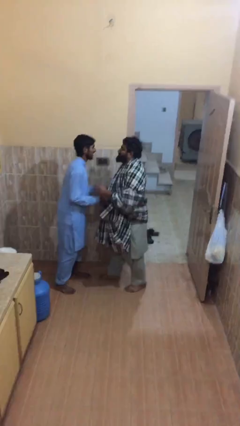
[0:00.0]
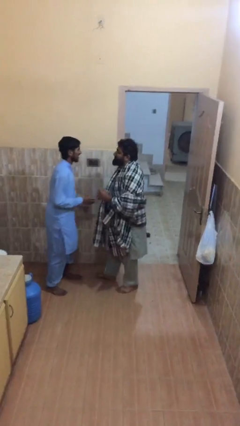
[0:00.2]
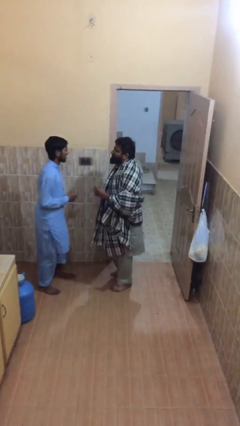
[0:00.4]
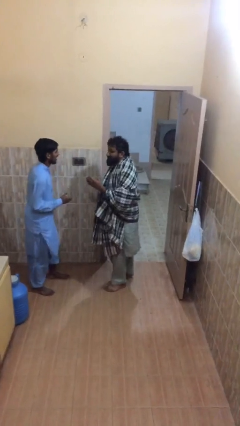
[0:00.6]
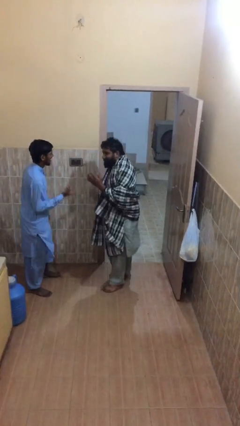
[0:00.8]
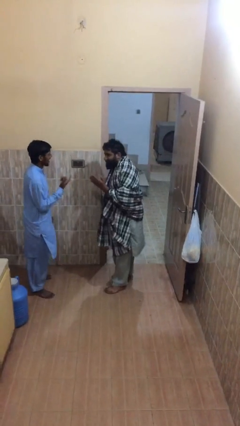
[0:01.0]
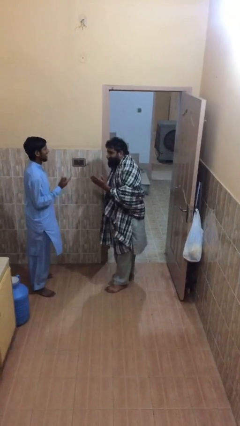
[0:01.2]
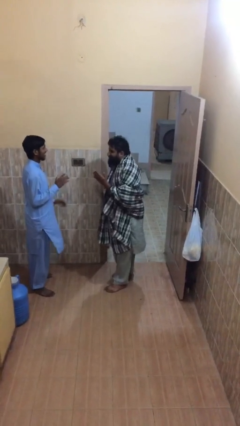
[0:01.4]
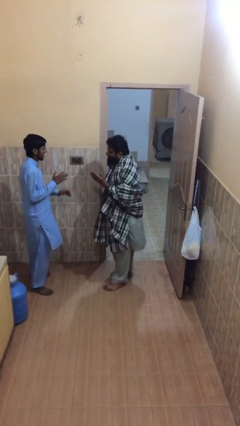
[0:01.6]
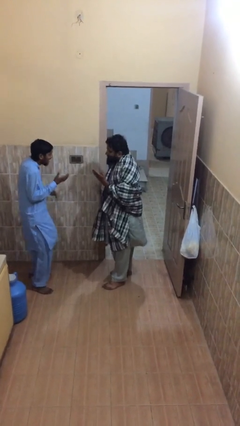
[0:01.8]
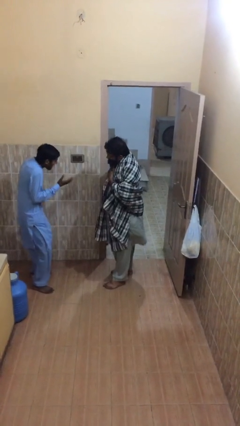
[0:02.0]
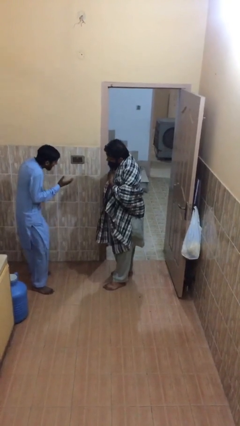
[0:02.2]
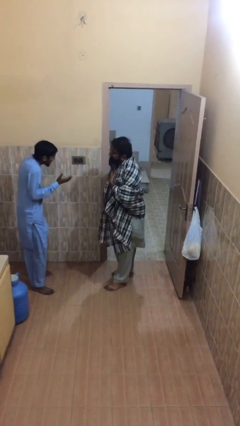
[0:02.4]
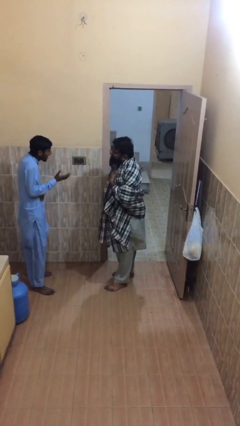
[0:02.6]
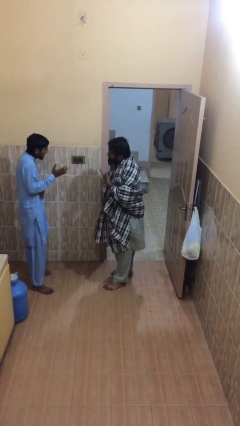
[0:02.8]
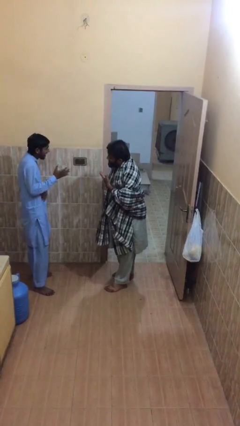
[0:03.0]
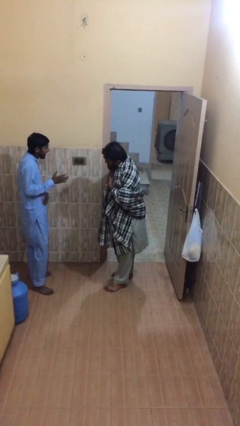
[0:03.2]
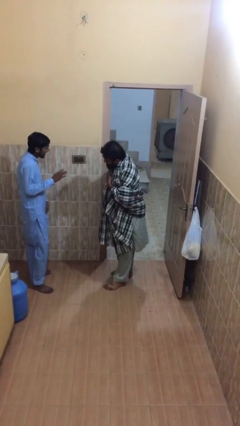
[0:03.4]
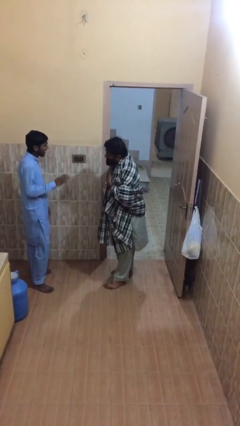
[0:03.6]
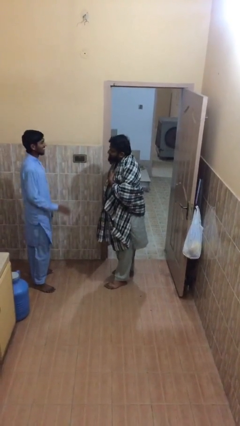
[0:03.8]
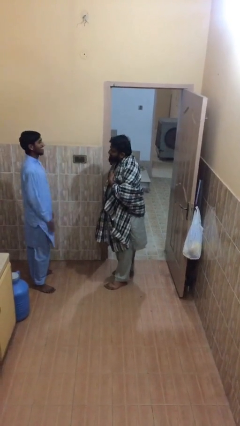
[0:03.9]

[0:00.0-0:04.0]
person talks to person

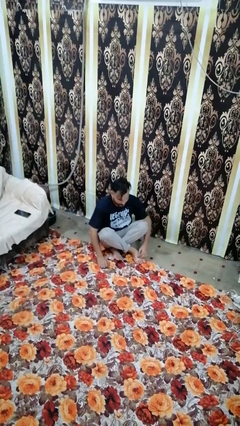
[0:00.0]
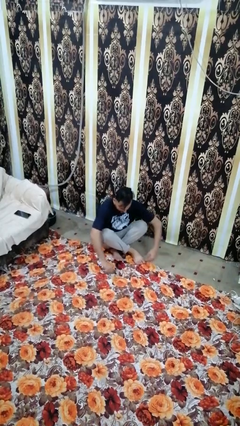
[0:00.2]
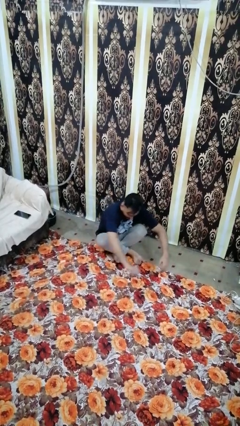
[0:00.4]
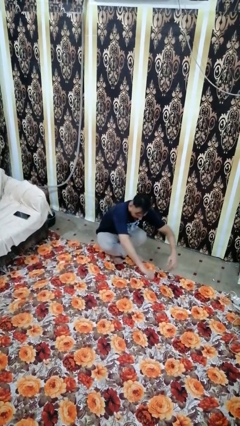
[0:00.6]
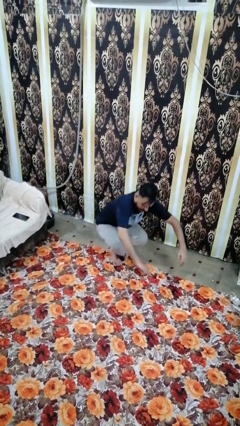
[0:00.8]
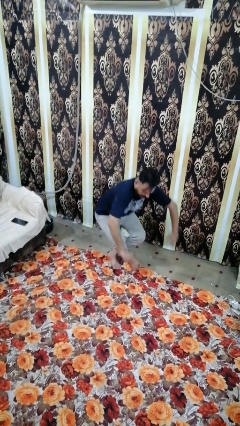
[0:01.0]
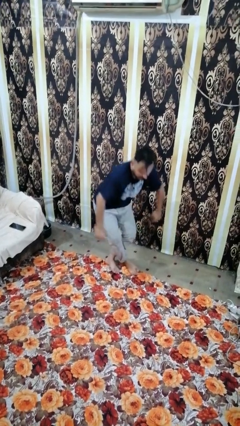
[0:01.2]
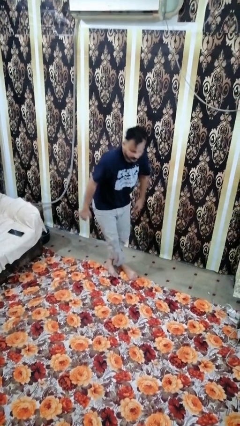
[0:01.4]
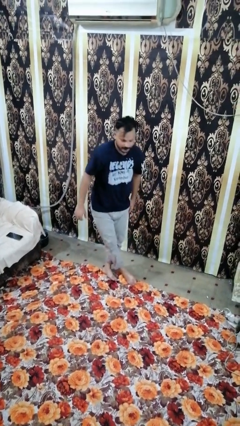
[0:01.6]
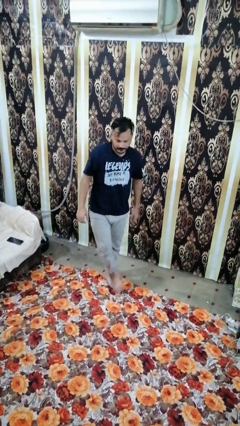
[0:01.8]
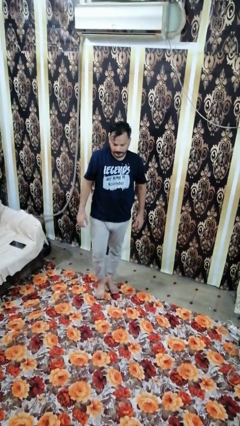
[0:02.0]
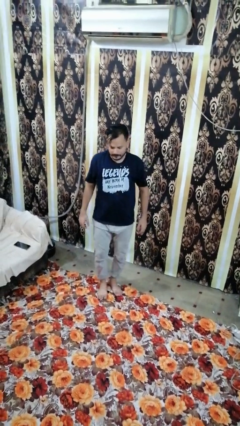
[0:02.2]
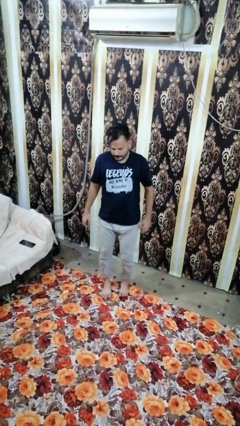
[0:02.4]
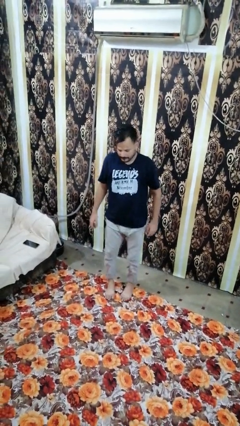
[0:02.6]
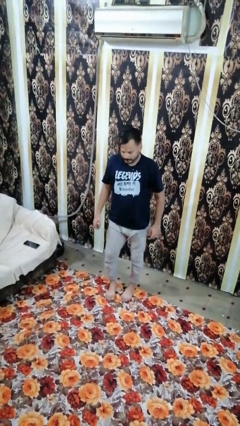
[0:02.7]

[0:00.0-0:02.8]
person stands up from floor

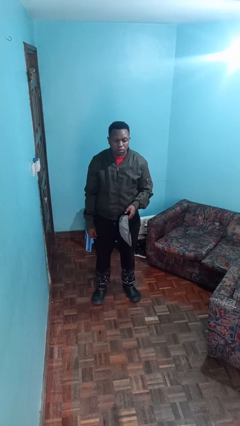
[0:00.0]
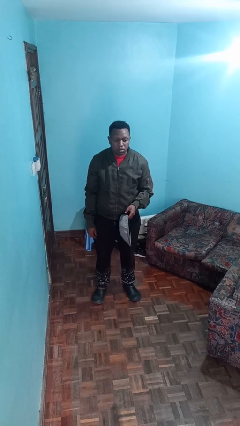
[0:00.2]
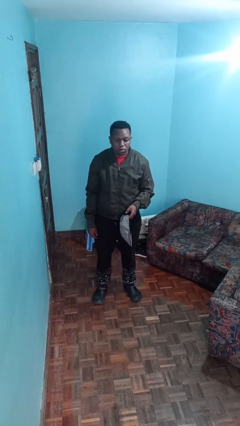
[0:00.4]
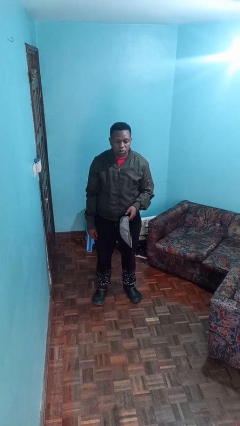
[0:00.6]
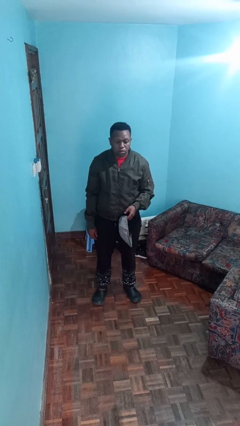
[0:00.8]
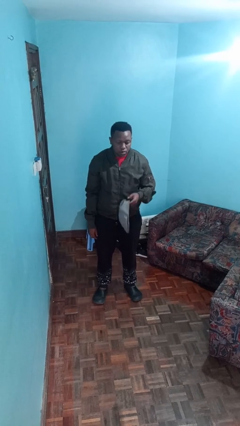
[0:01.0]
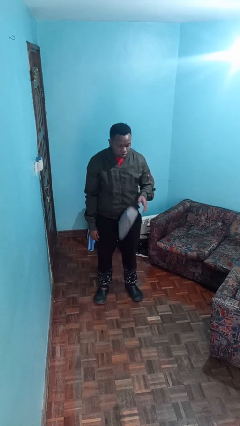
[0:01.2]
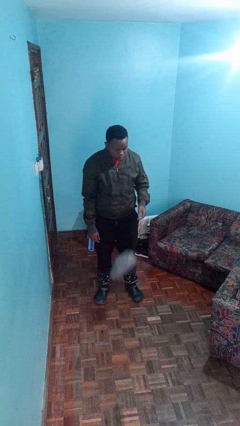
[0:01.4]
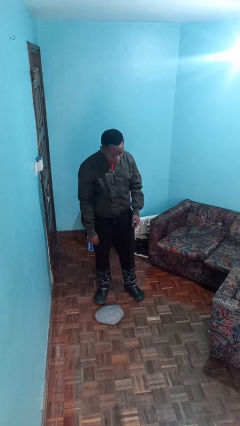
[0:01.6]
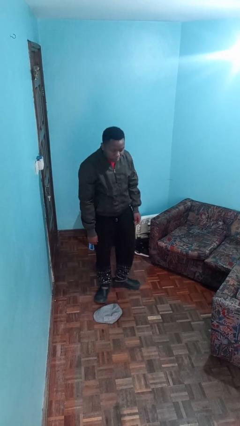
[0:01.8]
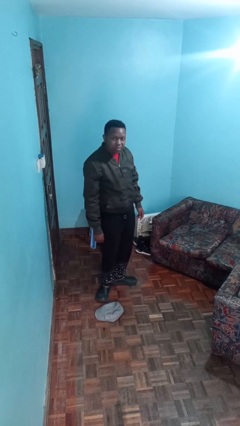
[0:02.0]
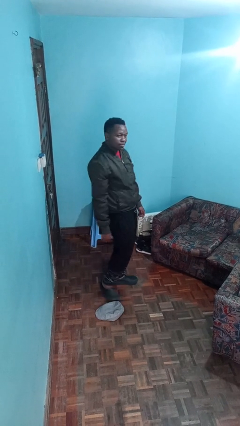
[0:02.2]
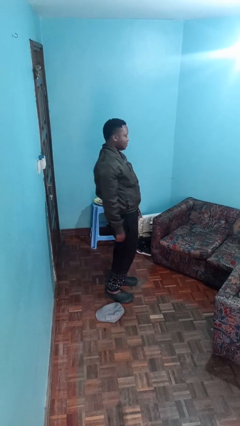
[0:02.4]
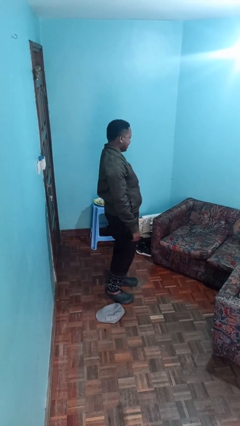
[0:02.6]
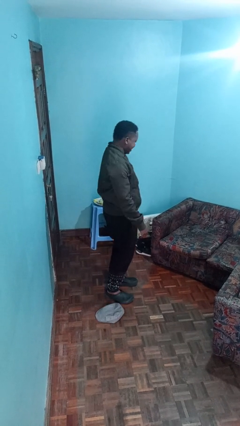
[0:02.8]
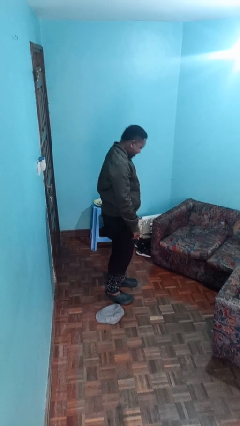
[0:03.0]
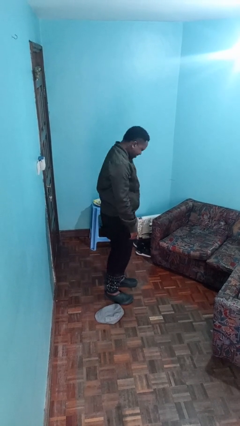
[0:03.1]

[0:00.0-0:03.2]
person drops object

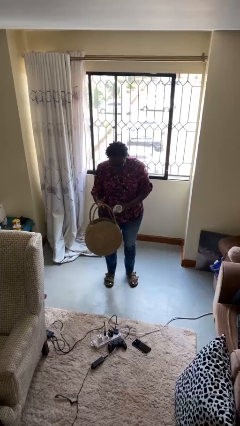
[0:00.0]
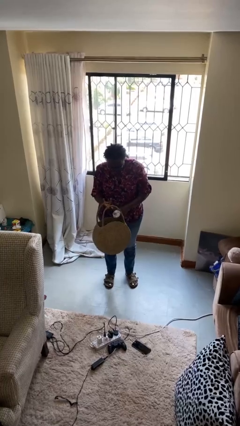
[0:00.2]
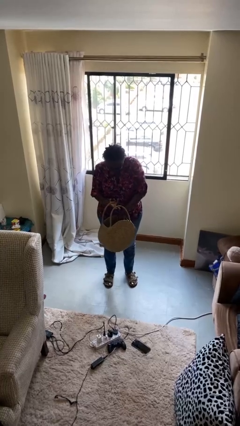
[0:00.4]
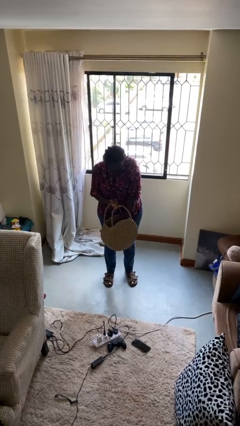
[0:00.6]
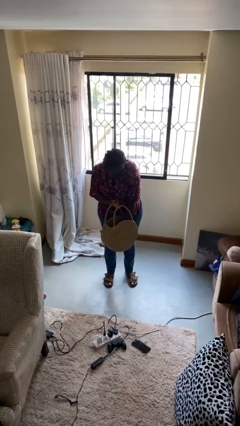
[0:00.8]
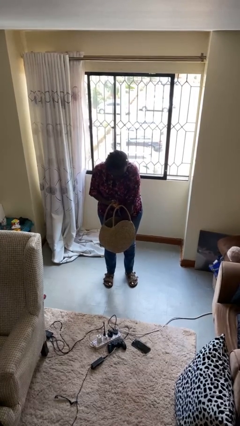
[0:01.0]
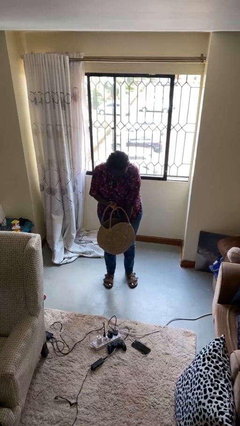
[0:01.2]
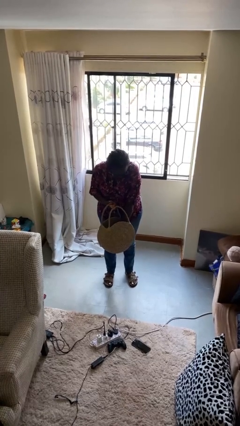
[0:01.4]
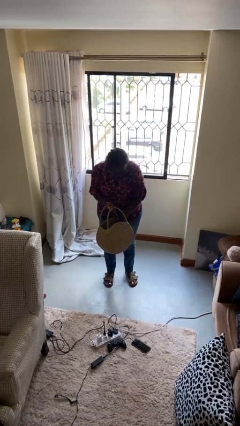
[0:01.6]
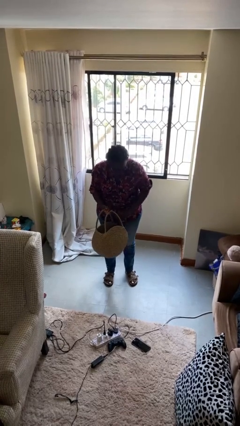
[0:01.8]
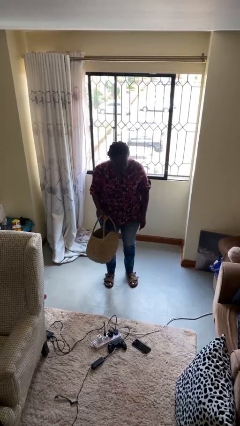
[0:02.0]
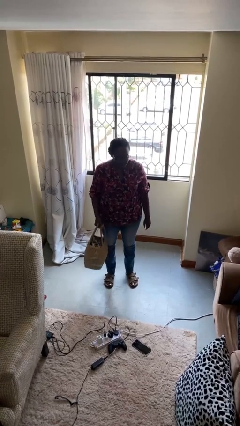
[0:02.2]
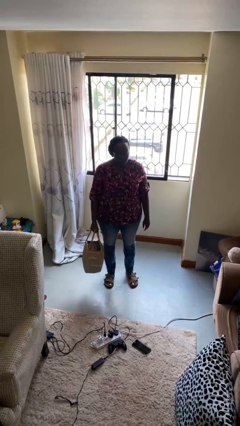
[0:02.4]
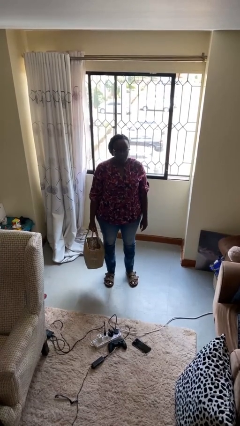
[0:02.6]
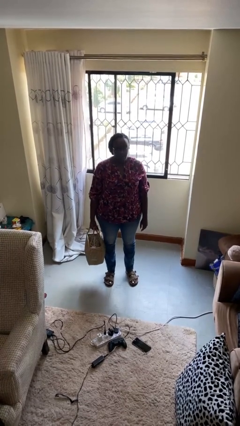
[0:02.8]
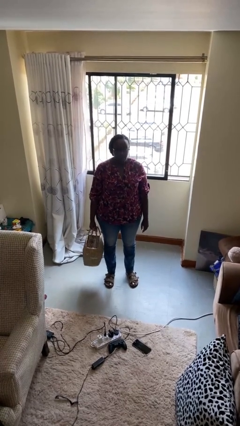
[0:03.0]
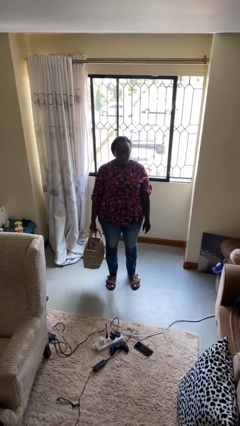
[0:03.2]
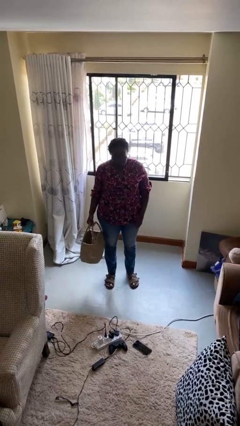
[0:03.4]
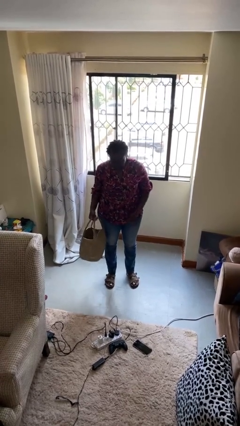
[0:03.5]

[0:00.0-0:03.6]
person puts object into basket

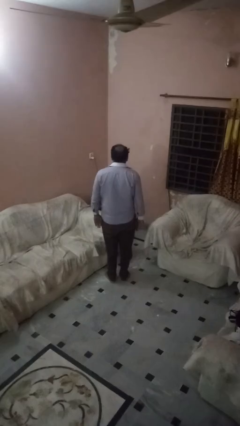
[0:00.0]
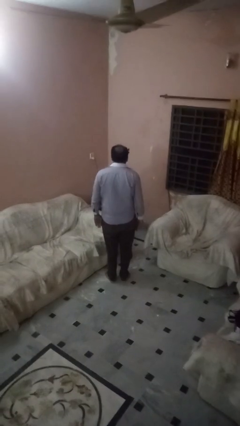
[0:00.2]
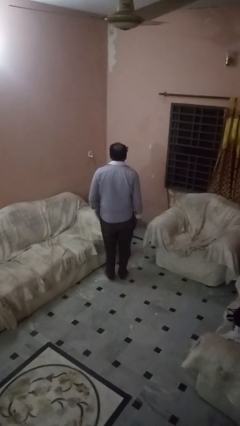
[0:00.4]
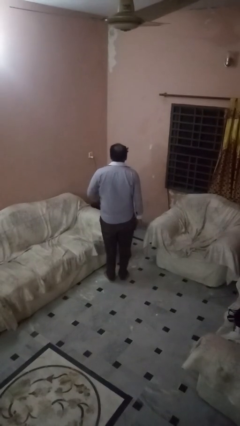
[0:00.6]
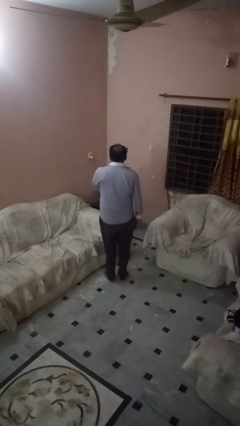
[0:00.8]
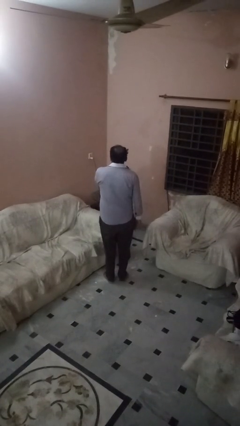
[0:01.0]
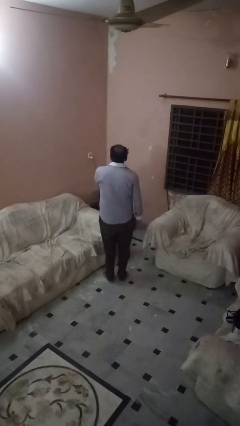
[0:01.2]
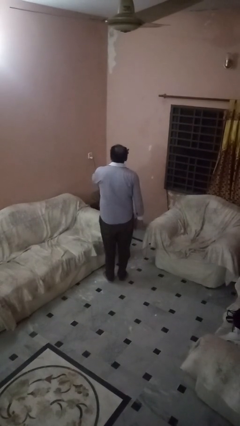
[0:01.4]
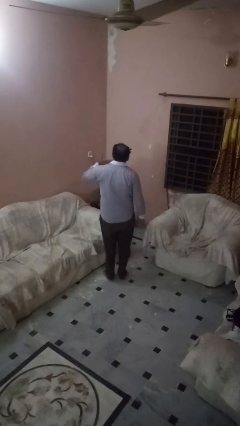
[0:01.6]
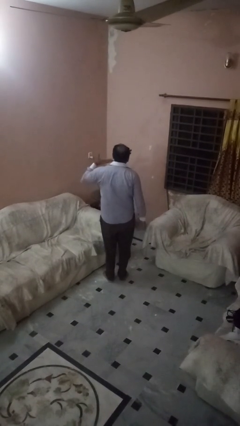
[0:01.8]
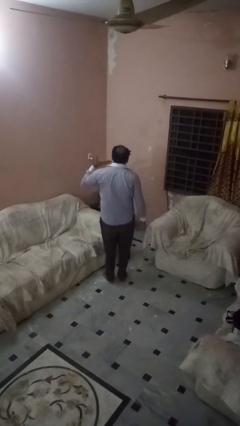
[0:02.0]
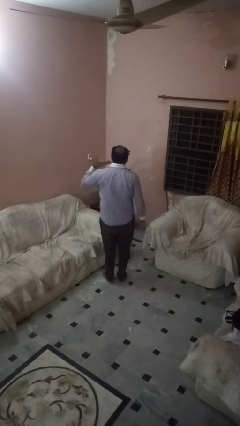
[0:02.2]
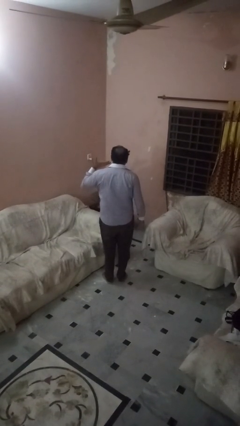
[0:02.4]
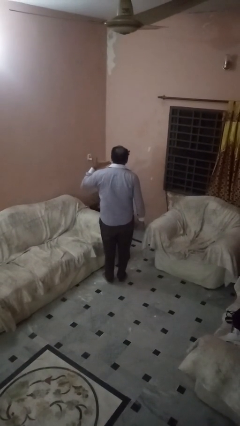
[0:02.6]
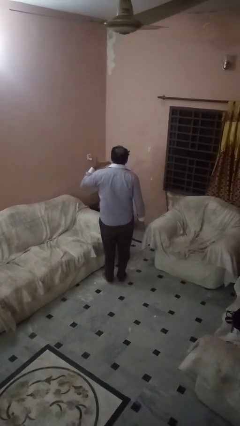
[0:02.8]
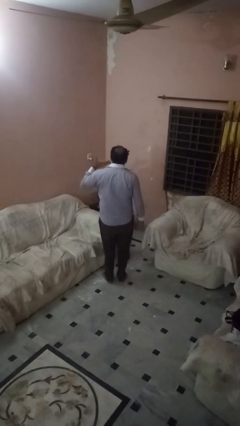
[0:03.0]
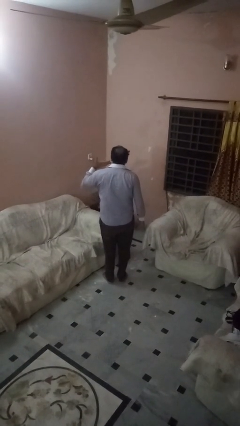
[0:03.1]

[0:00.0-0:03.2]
person gestures cut

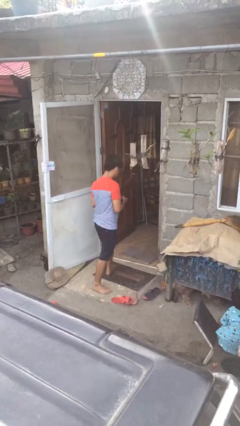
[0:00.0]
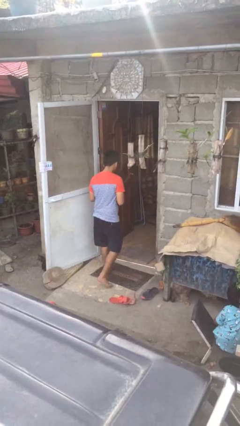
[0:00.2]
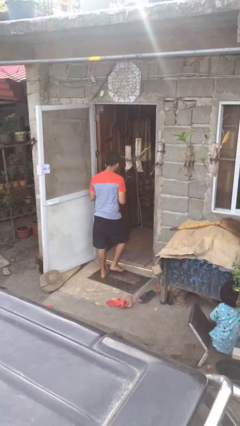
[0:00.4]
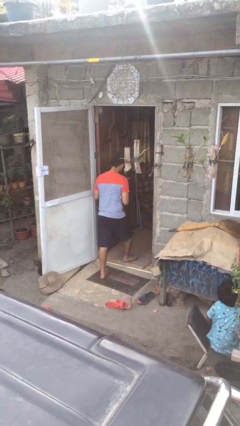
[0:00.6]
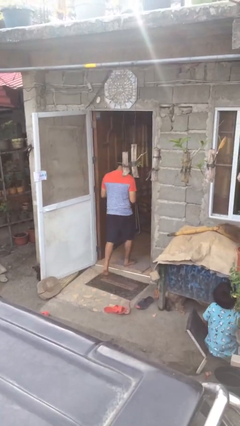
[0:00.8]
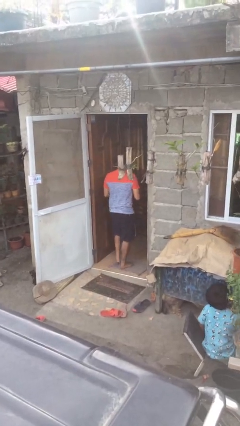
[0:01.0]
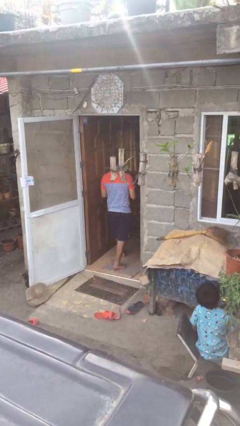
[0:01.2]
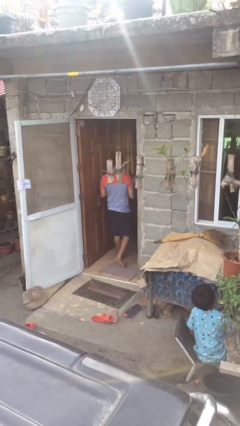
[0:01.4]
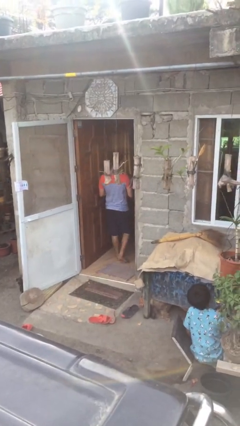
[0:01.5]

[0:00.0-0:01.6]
person exits scene through structure
